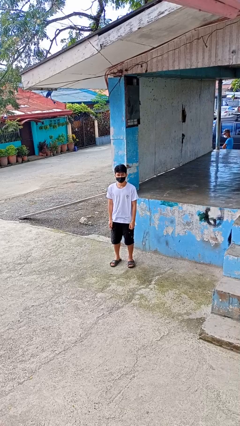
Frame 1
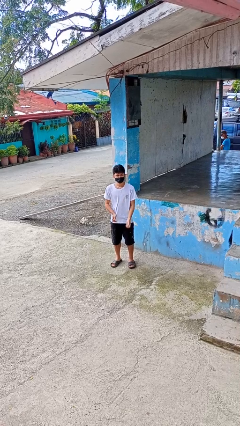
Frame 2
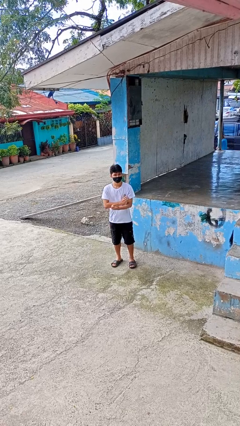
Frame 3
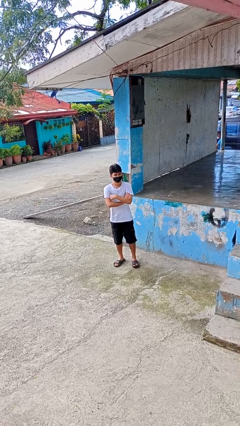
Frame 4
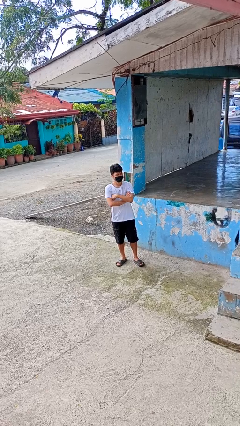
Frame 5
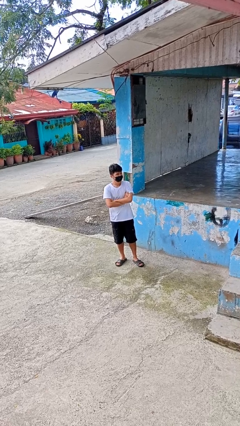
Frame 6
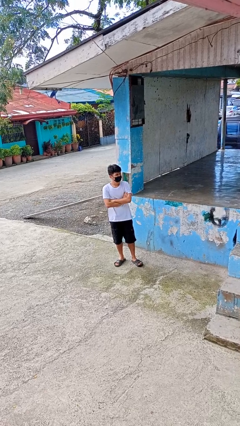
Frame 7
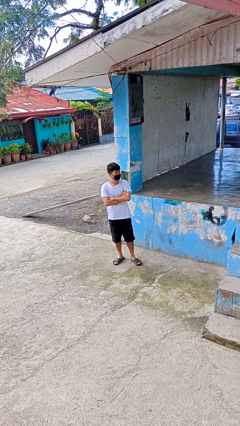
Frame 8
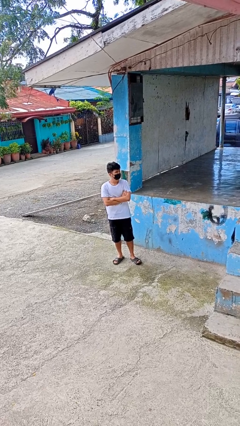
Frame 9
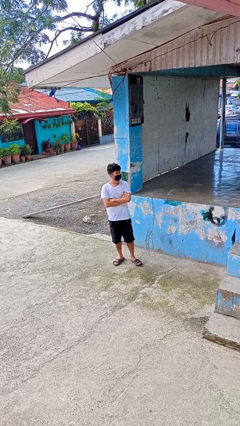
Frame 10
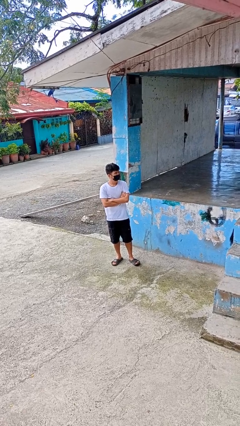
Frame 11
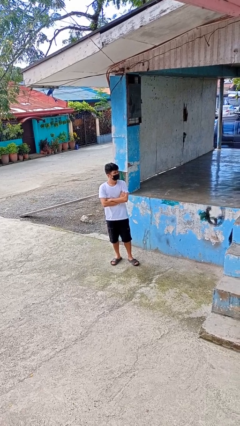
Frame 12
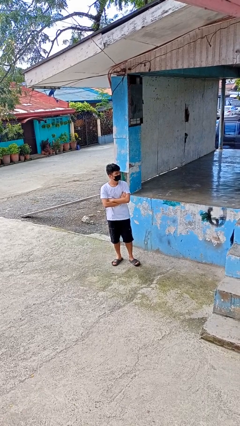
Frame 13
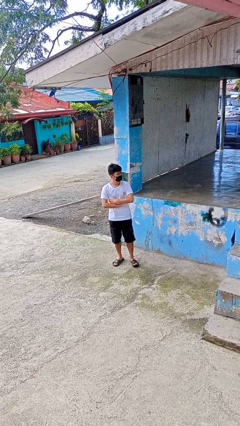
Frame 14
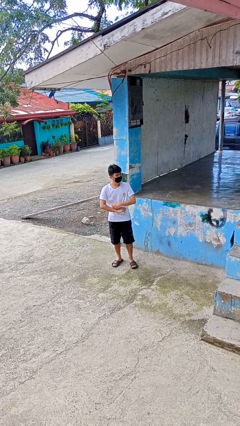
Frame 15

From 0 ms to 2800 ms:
person crosses arms

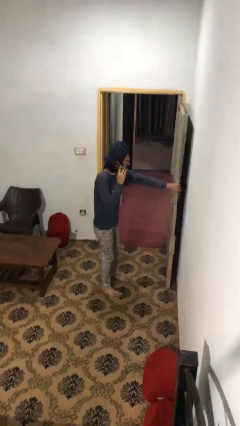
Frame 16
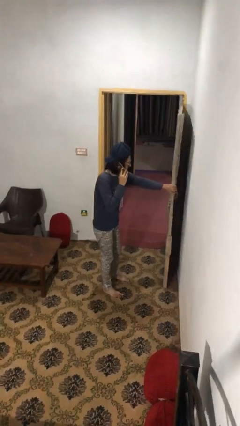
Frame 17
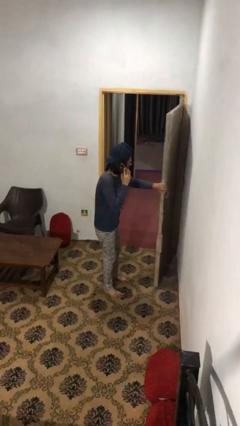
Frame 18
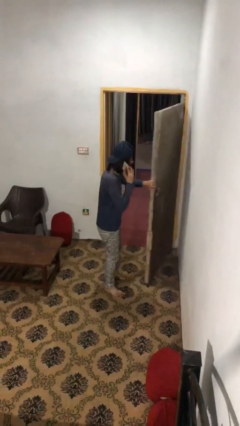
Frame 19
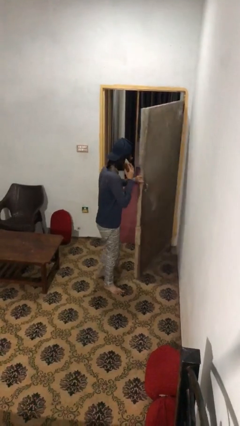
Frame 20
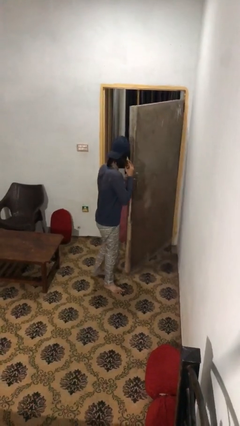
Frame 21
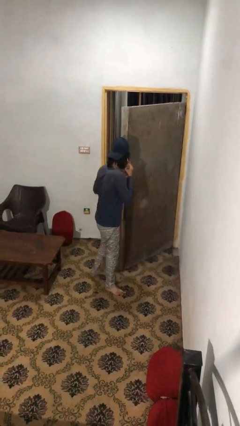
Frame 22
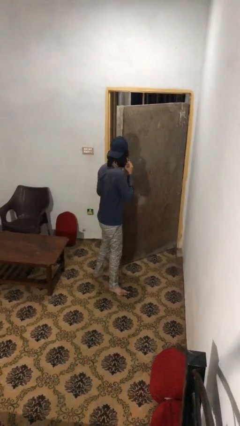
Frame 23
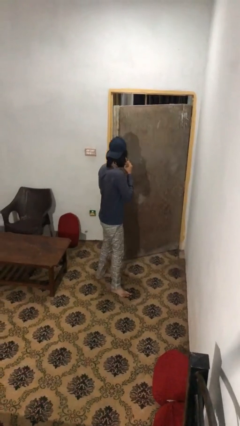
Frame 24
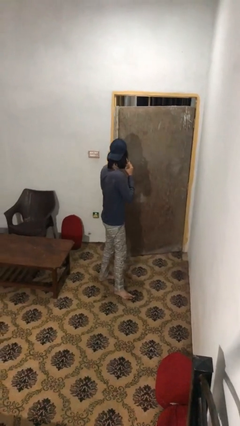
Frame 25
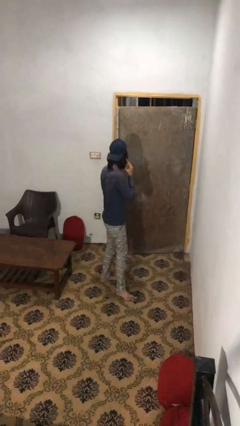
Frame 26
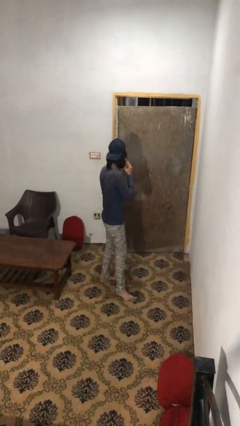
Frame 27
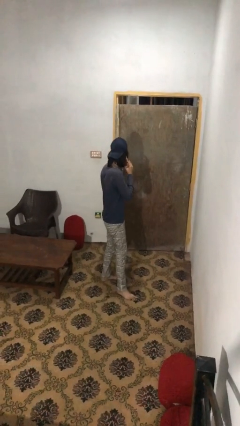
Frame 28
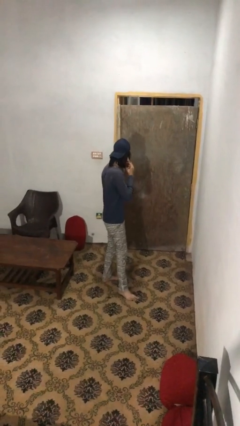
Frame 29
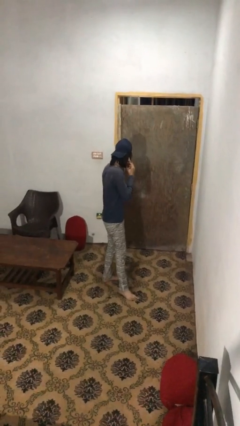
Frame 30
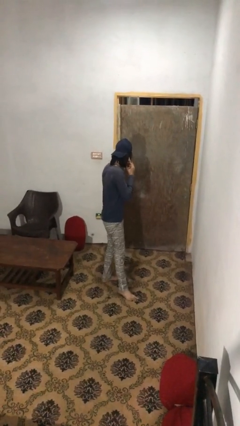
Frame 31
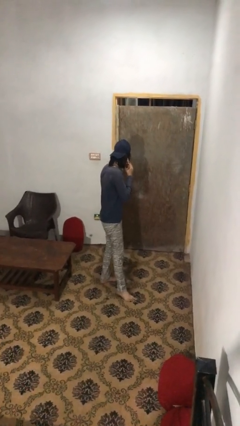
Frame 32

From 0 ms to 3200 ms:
person closes facility door

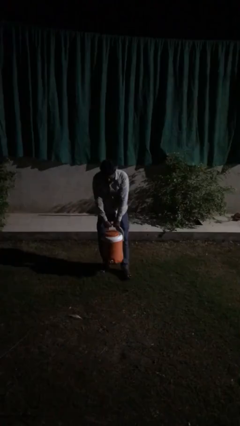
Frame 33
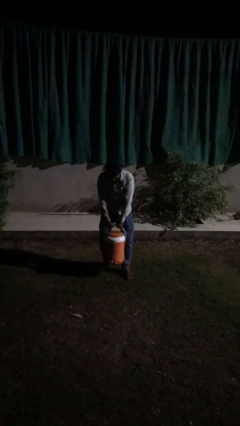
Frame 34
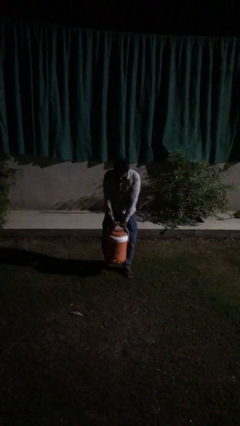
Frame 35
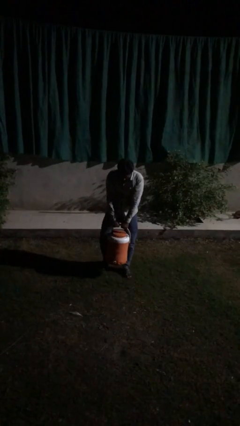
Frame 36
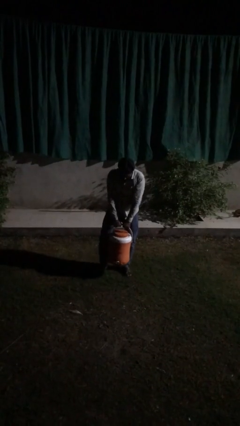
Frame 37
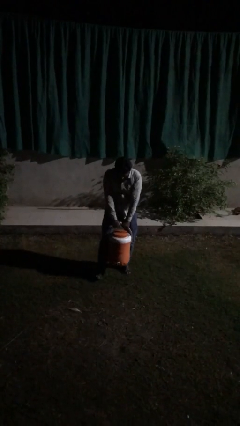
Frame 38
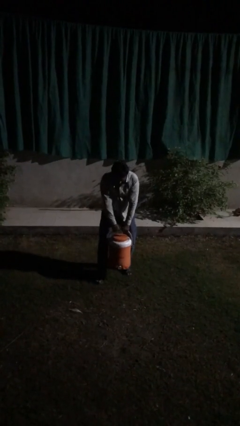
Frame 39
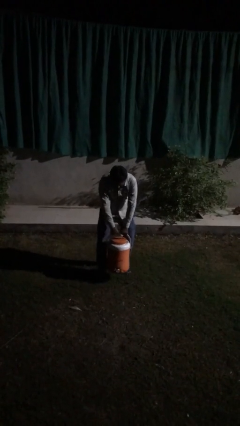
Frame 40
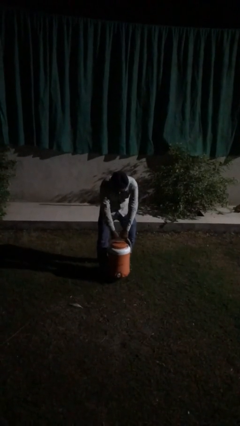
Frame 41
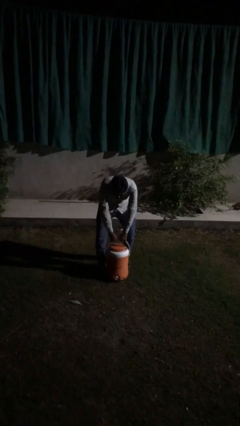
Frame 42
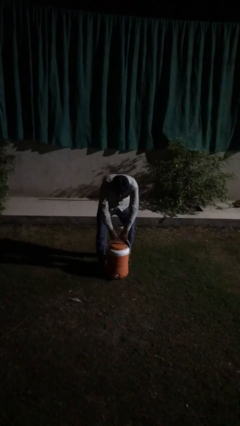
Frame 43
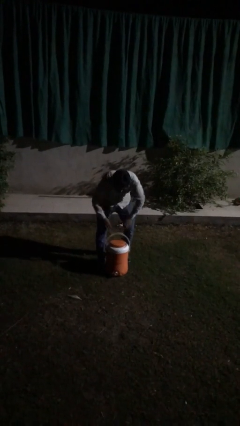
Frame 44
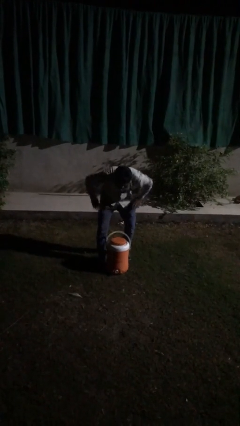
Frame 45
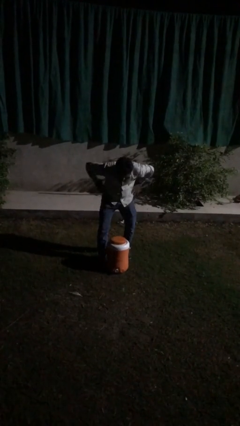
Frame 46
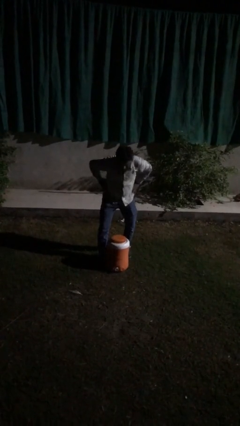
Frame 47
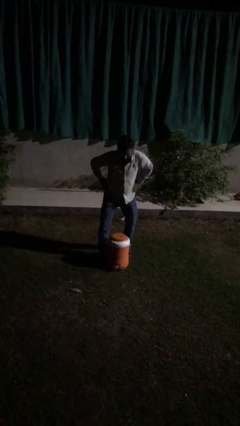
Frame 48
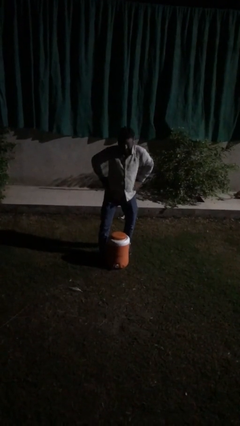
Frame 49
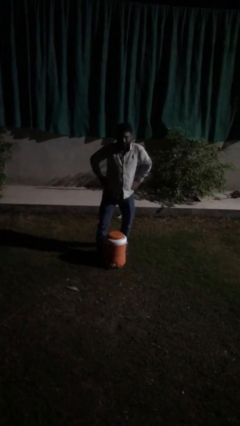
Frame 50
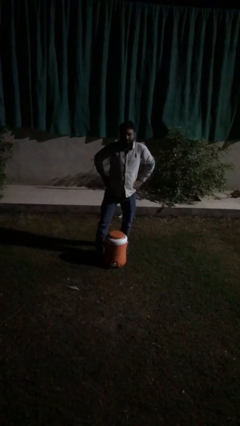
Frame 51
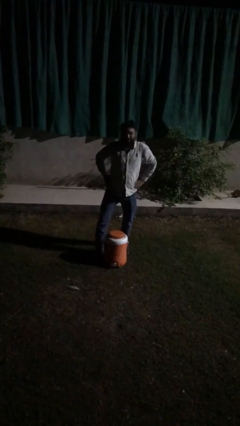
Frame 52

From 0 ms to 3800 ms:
person puts down object on floor

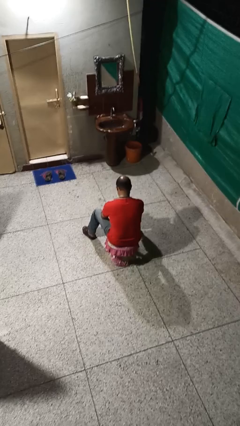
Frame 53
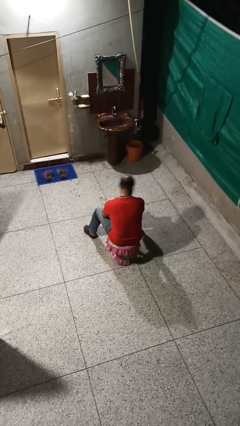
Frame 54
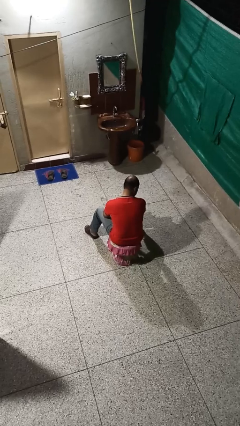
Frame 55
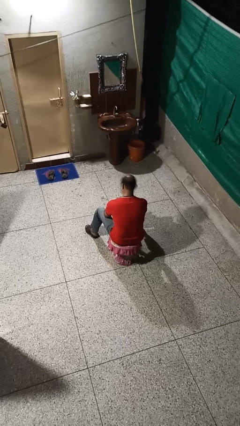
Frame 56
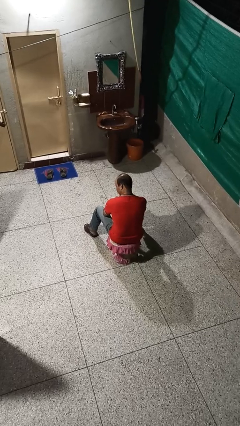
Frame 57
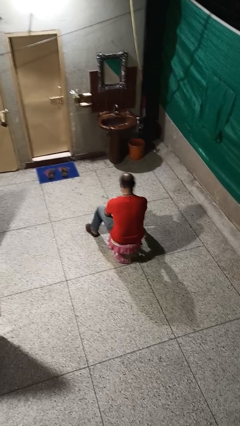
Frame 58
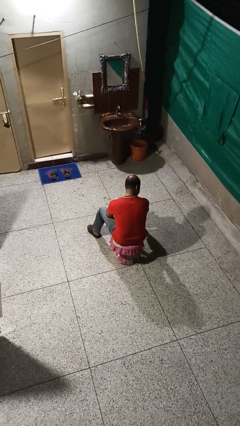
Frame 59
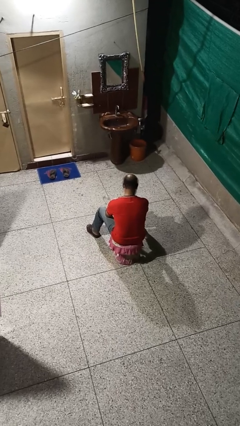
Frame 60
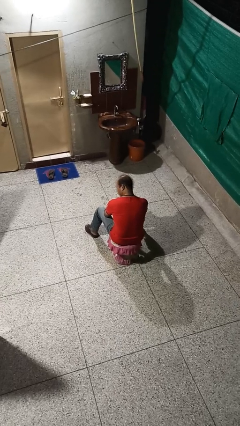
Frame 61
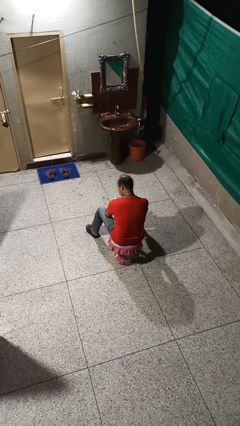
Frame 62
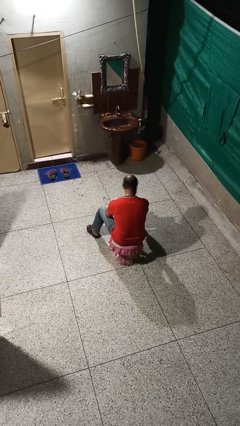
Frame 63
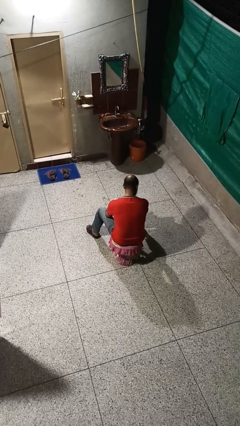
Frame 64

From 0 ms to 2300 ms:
person shakes head

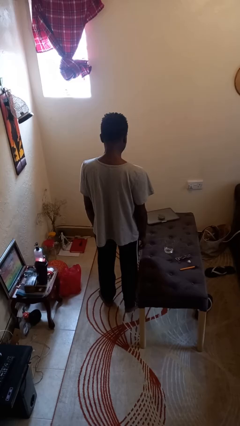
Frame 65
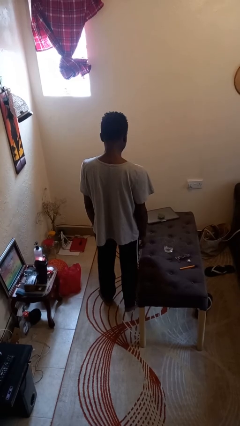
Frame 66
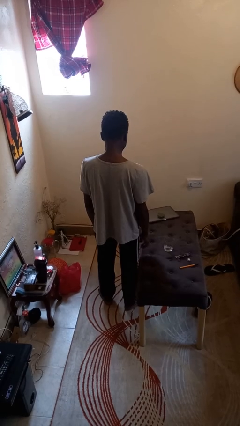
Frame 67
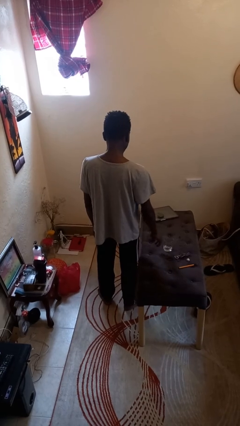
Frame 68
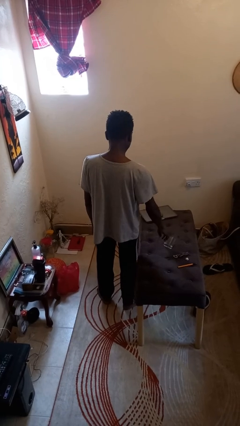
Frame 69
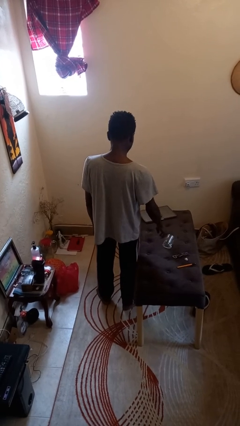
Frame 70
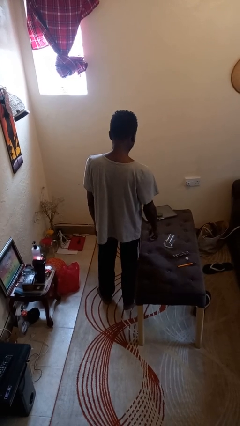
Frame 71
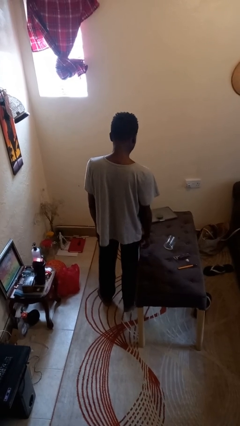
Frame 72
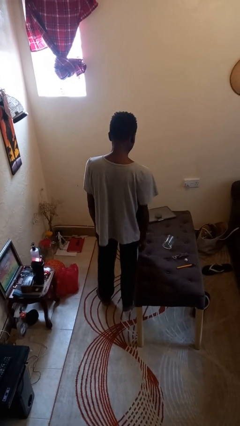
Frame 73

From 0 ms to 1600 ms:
person knocks over glass

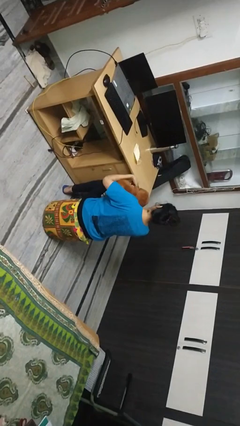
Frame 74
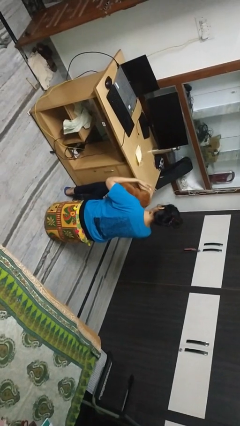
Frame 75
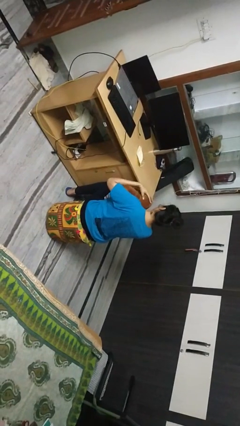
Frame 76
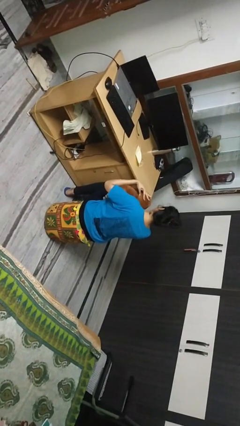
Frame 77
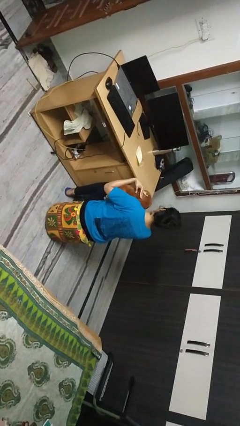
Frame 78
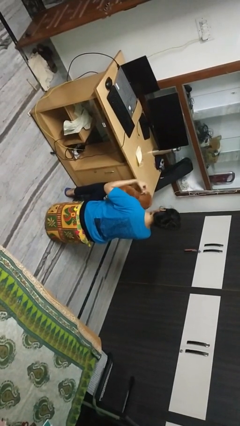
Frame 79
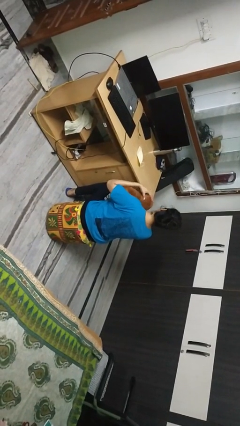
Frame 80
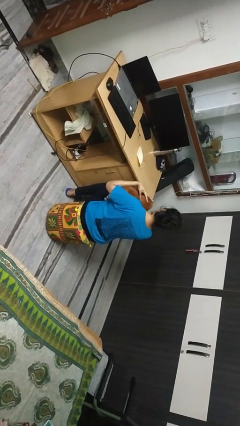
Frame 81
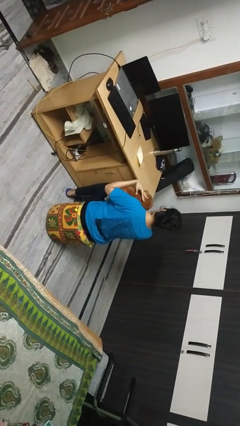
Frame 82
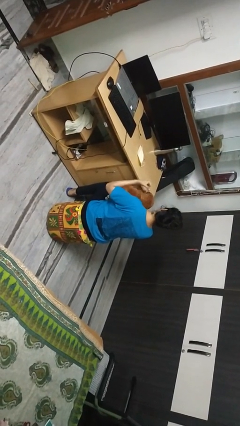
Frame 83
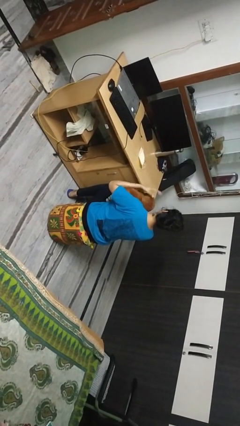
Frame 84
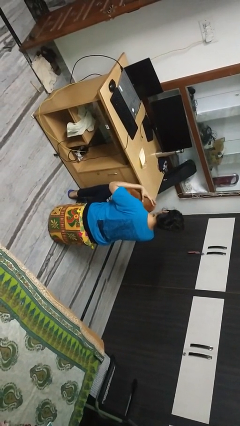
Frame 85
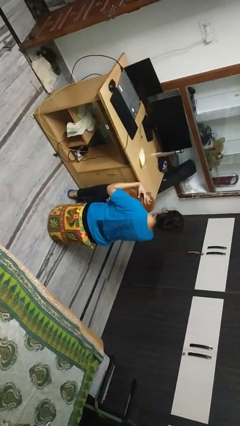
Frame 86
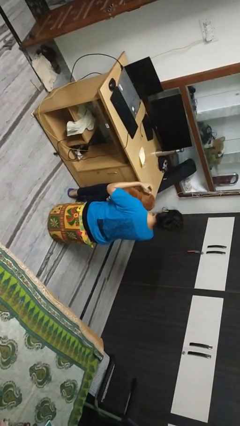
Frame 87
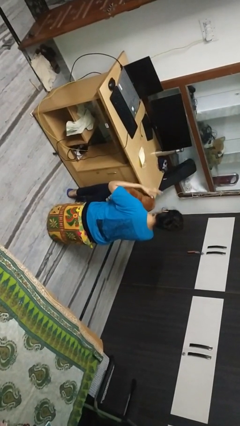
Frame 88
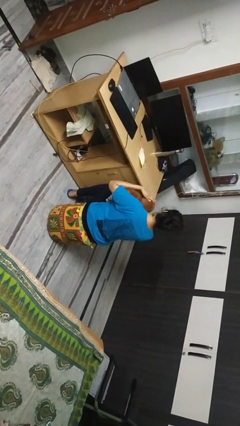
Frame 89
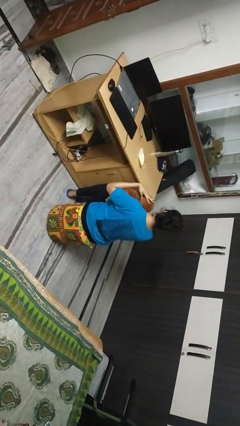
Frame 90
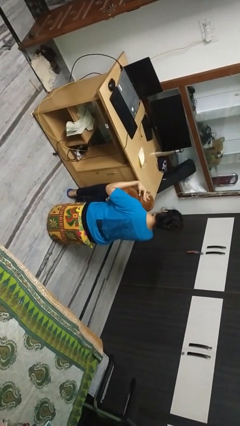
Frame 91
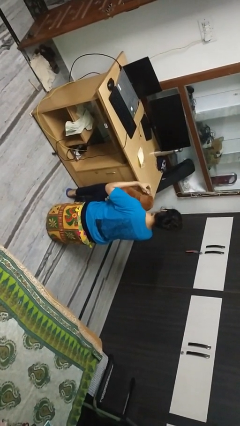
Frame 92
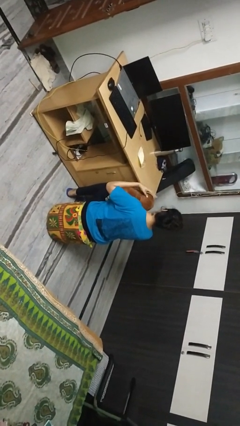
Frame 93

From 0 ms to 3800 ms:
person pets dog

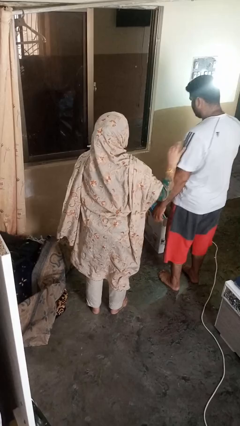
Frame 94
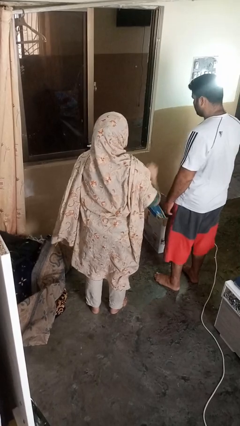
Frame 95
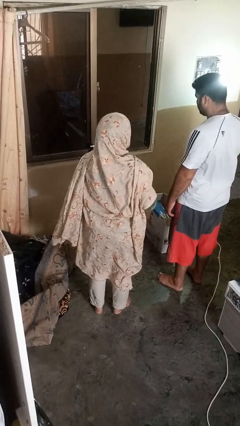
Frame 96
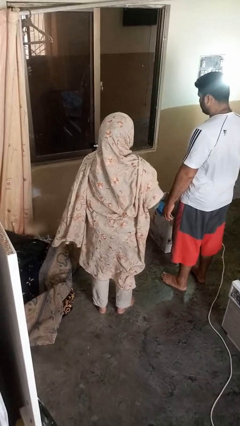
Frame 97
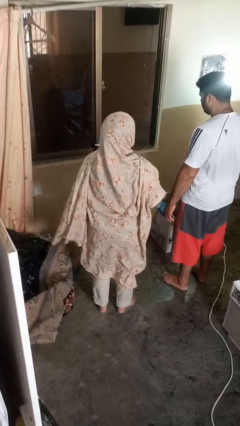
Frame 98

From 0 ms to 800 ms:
person spins person around
